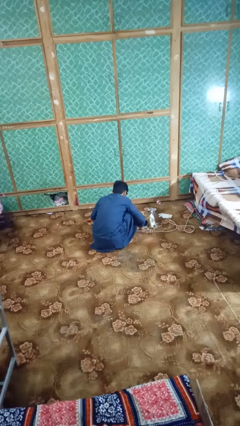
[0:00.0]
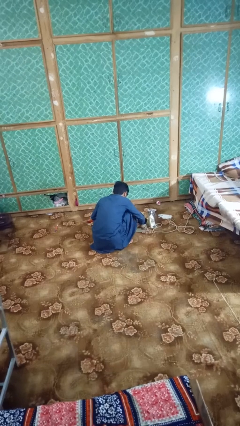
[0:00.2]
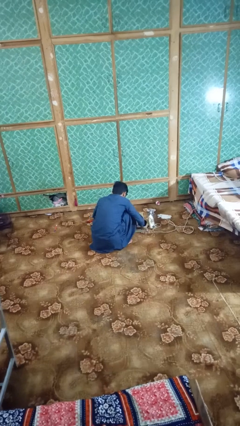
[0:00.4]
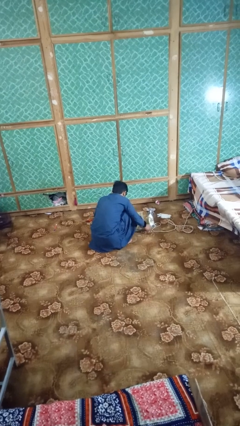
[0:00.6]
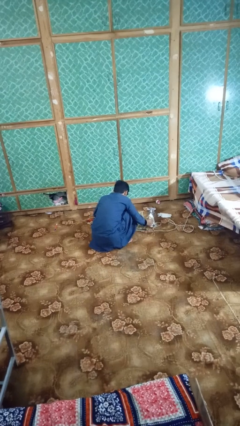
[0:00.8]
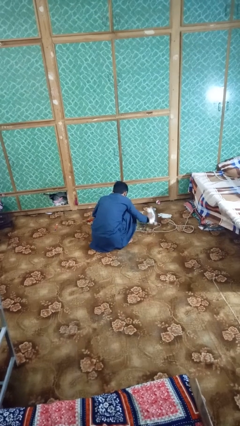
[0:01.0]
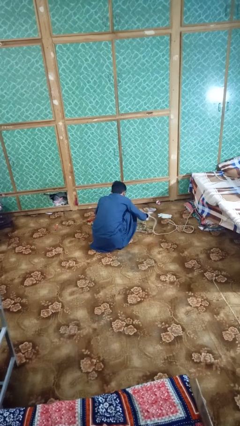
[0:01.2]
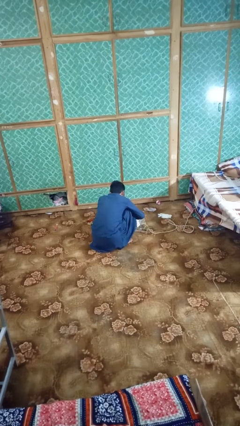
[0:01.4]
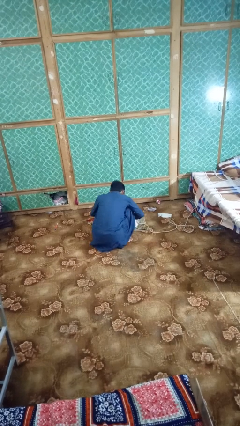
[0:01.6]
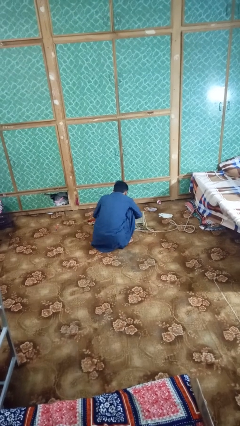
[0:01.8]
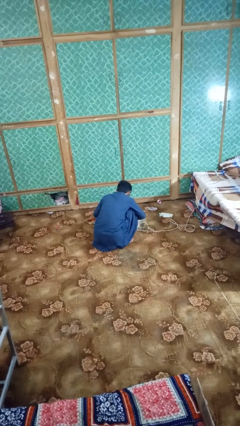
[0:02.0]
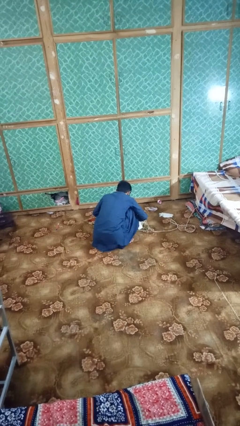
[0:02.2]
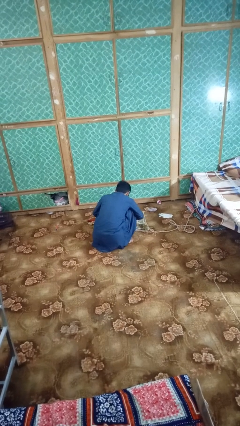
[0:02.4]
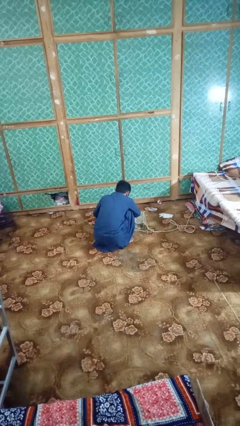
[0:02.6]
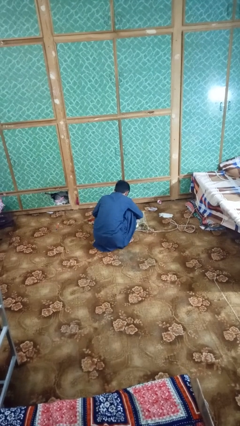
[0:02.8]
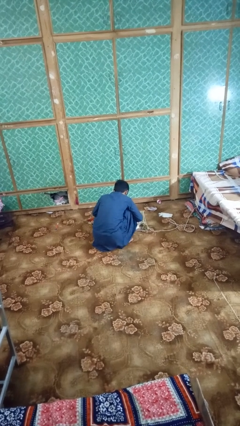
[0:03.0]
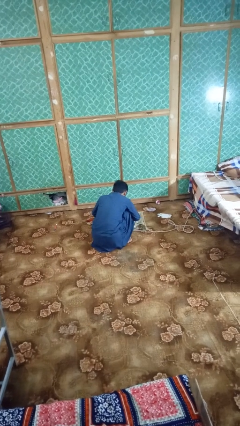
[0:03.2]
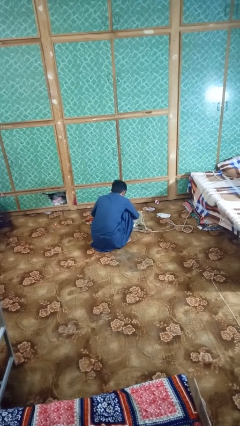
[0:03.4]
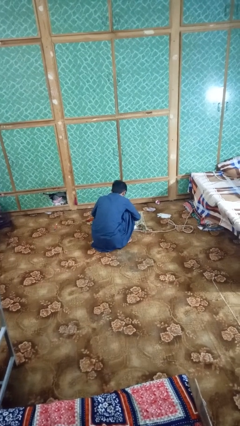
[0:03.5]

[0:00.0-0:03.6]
person irons clothes

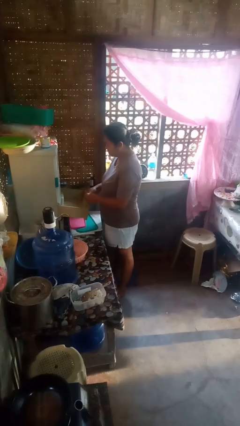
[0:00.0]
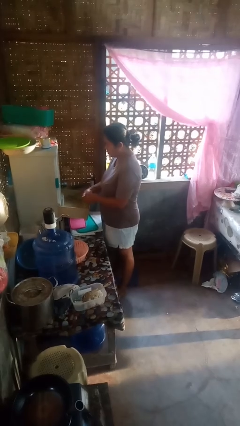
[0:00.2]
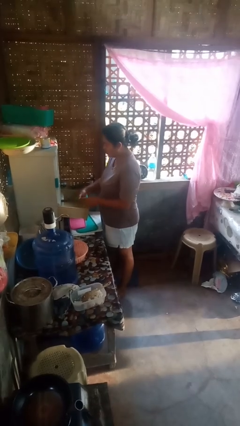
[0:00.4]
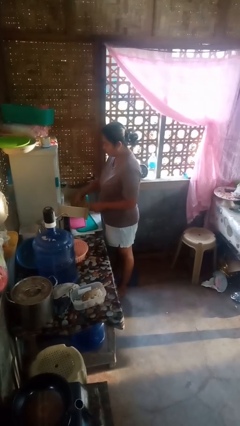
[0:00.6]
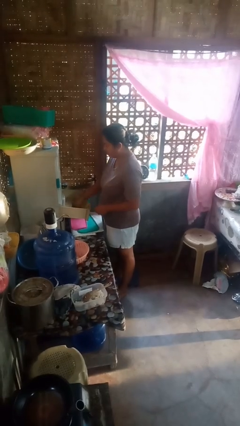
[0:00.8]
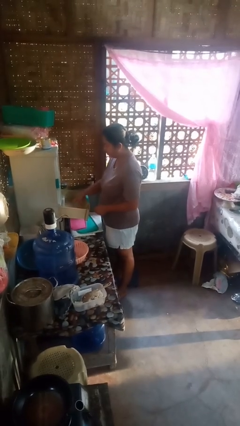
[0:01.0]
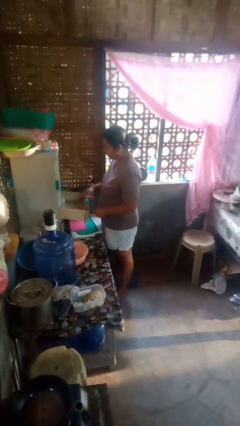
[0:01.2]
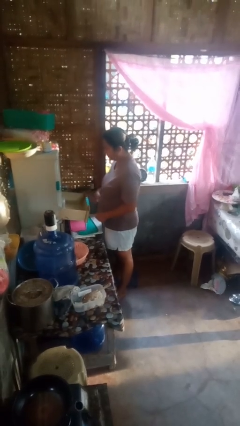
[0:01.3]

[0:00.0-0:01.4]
person puts object into kitchen drawer

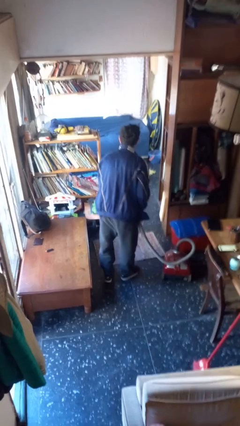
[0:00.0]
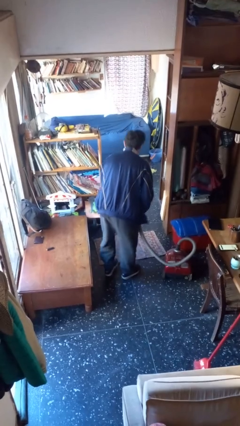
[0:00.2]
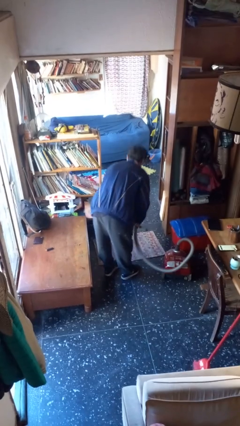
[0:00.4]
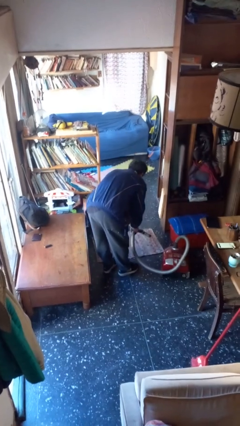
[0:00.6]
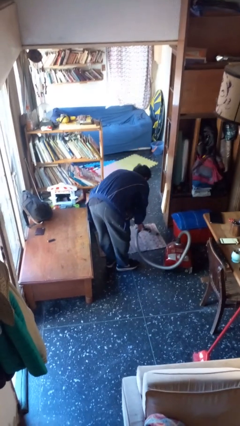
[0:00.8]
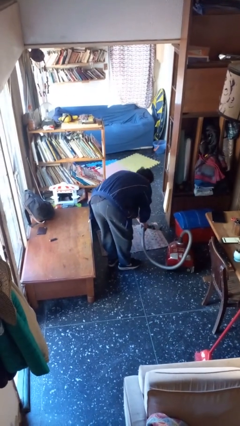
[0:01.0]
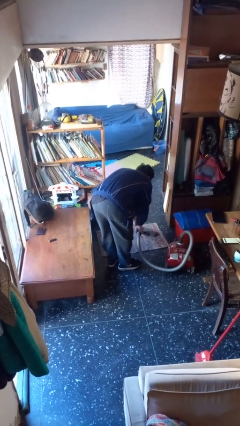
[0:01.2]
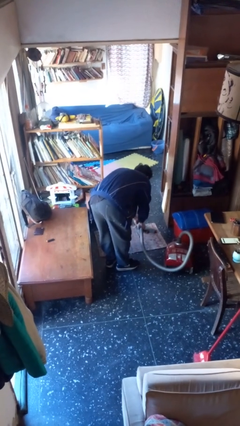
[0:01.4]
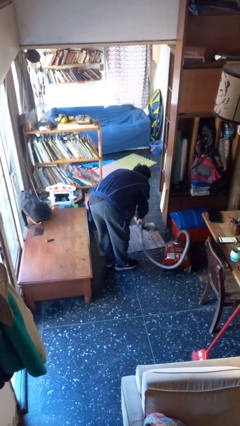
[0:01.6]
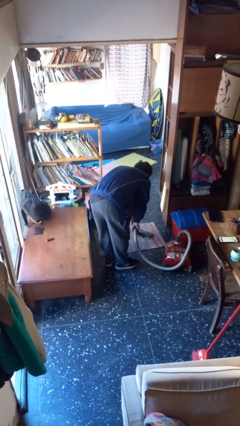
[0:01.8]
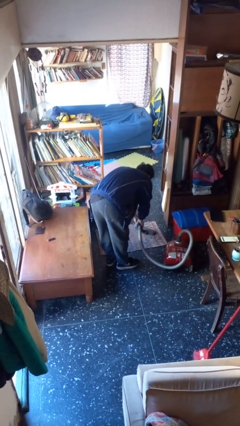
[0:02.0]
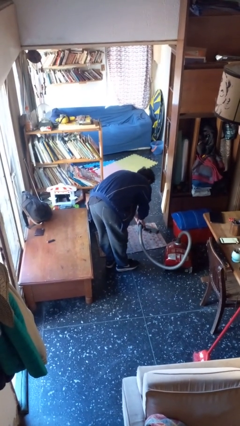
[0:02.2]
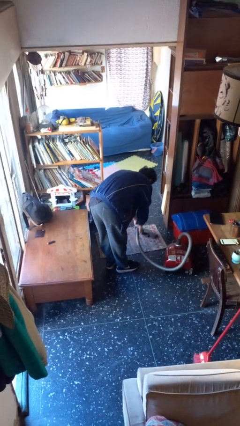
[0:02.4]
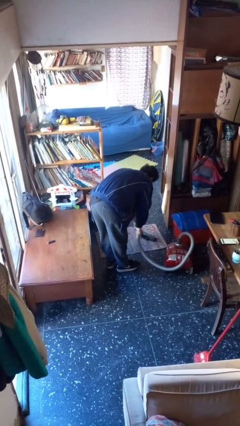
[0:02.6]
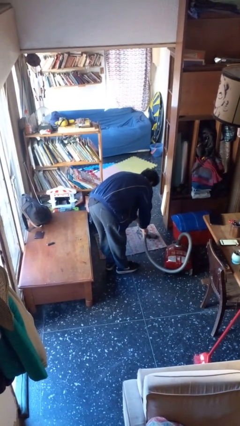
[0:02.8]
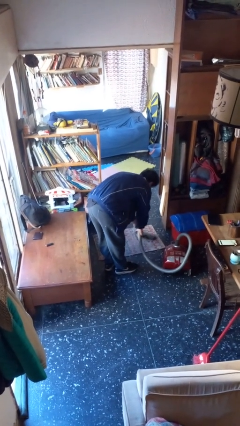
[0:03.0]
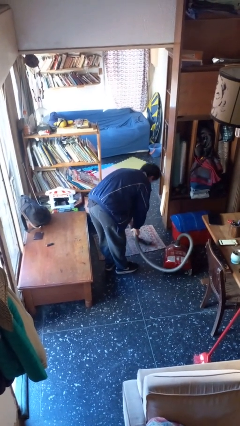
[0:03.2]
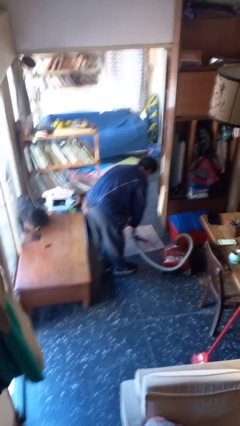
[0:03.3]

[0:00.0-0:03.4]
person vacuums carpet

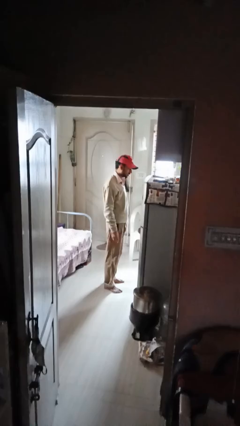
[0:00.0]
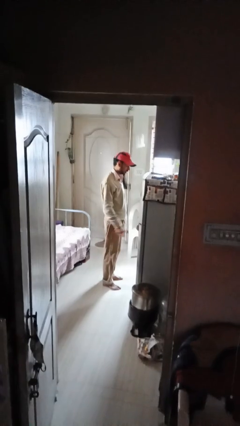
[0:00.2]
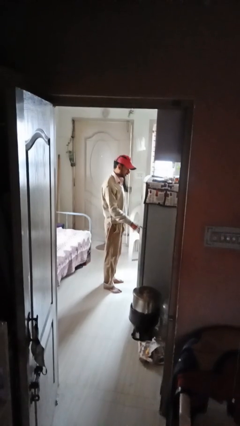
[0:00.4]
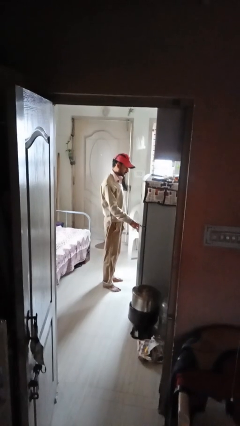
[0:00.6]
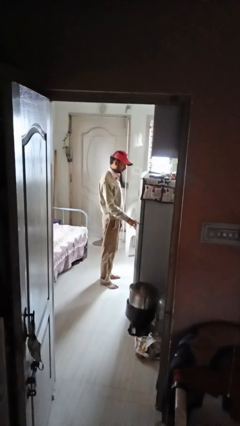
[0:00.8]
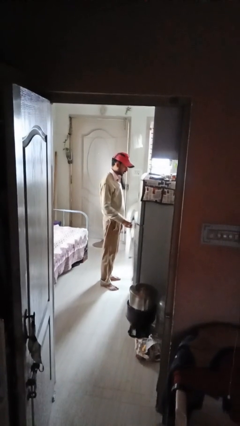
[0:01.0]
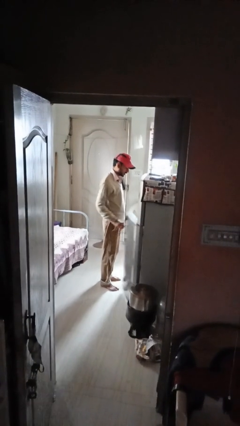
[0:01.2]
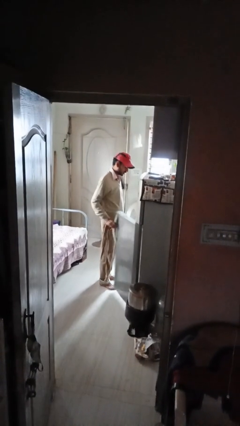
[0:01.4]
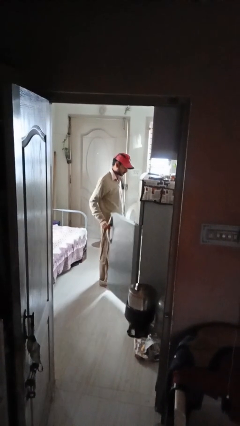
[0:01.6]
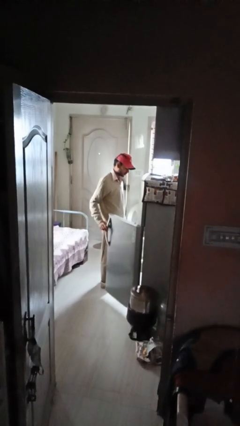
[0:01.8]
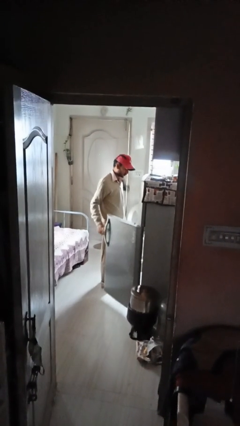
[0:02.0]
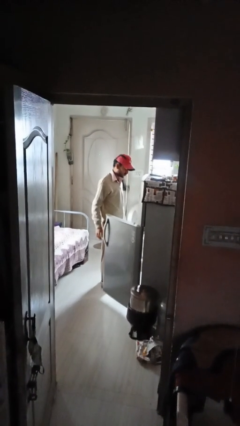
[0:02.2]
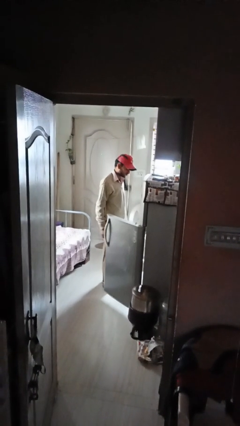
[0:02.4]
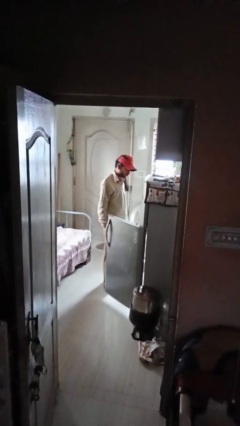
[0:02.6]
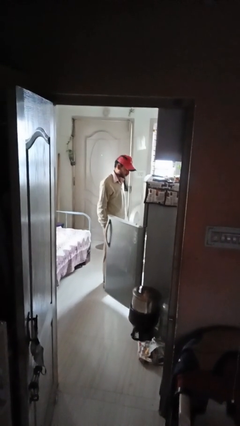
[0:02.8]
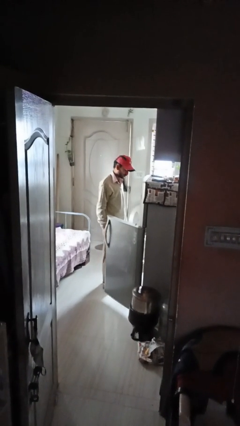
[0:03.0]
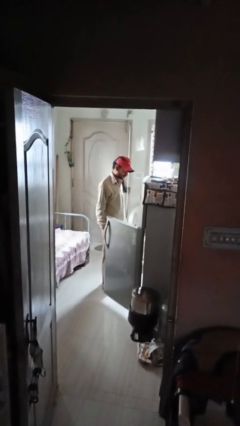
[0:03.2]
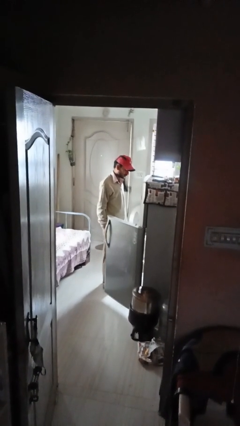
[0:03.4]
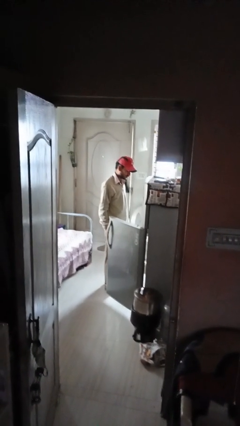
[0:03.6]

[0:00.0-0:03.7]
person opens refrigerator

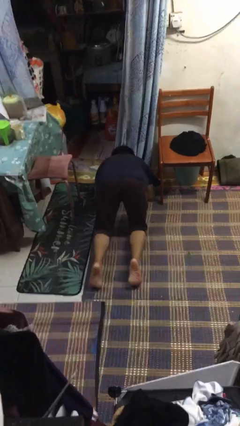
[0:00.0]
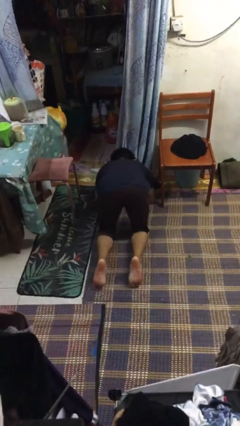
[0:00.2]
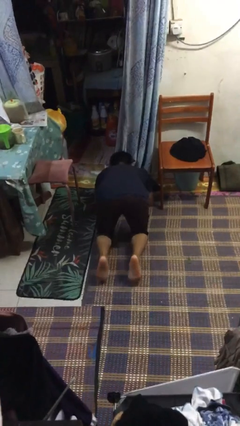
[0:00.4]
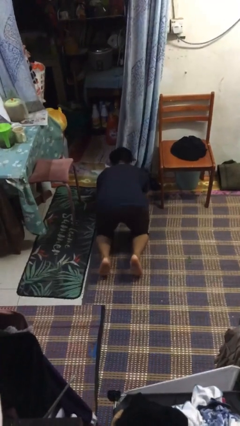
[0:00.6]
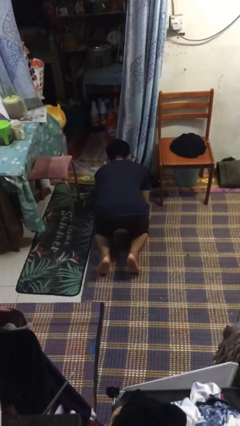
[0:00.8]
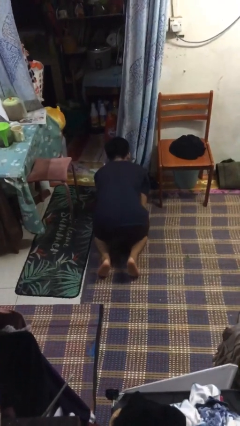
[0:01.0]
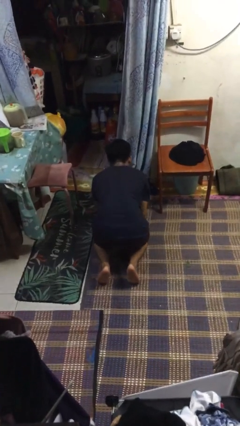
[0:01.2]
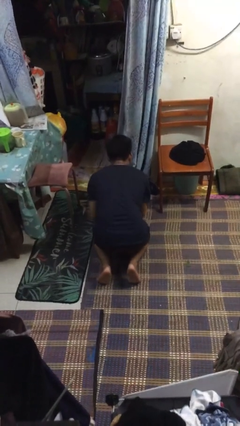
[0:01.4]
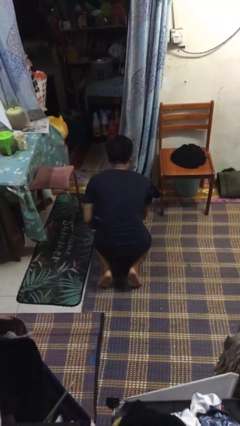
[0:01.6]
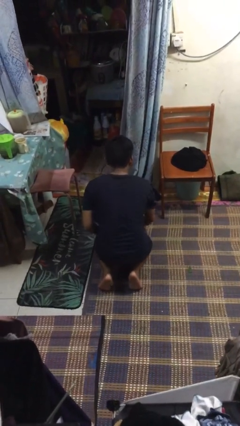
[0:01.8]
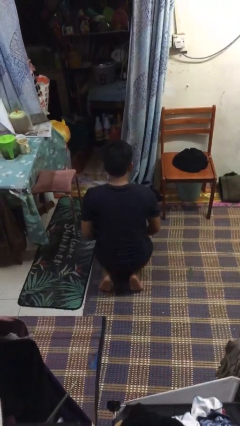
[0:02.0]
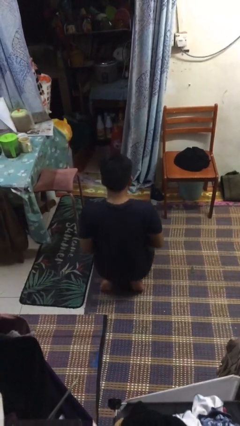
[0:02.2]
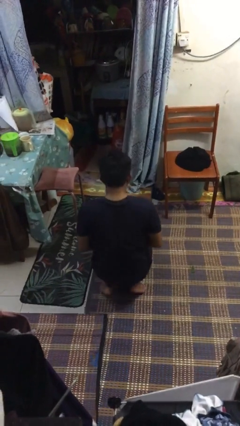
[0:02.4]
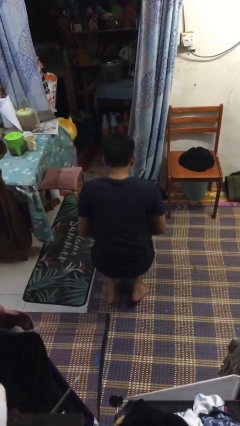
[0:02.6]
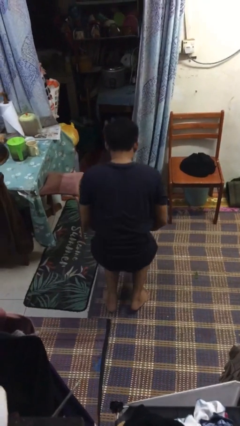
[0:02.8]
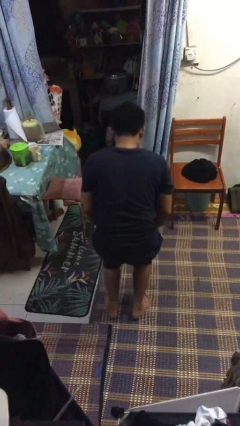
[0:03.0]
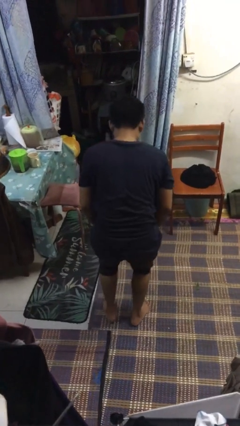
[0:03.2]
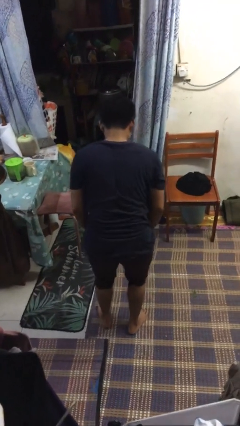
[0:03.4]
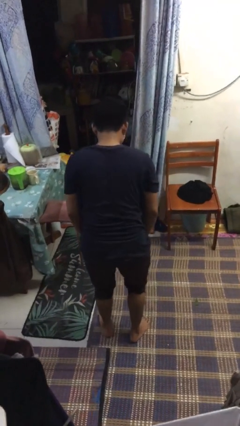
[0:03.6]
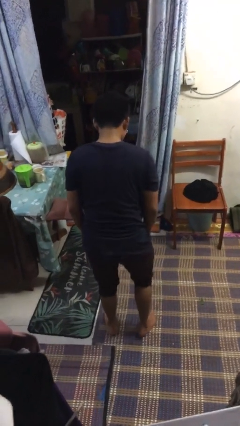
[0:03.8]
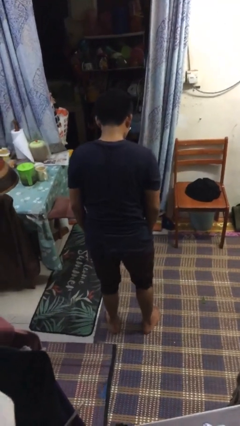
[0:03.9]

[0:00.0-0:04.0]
person stands up from floor

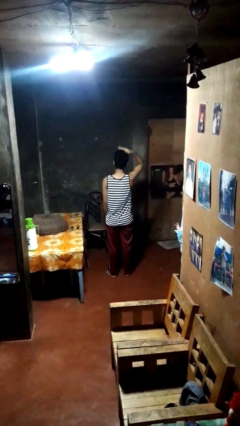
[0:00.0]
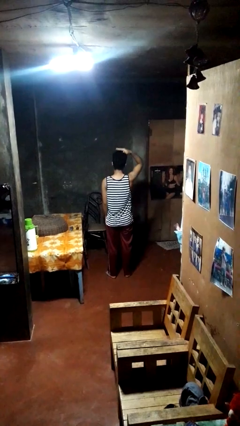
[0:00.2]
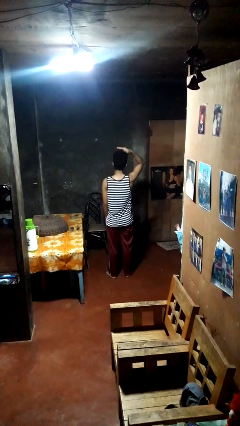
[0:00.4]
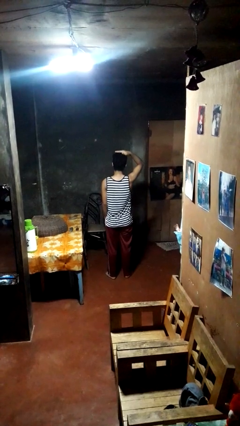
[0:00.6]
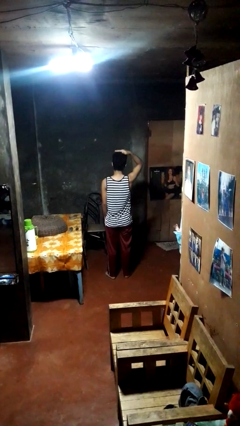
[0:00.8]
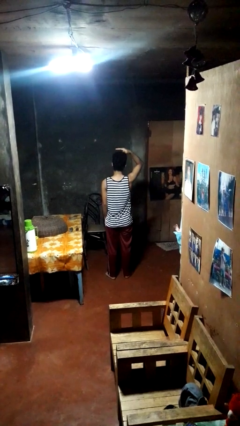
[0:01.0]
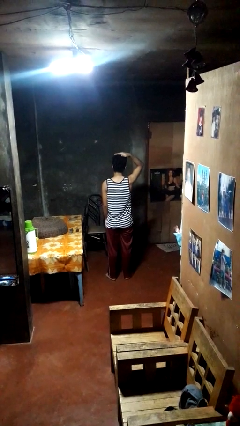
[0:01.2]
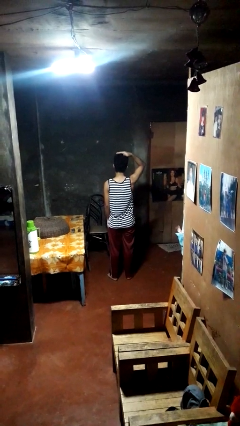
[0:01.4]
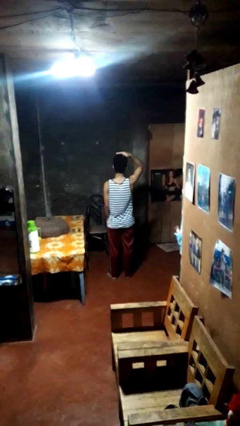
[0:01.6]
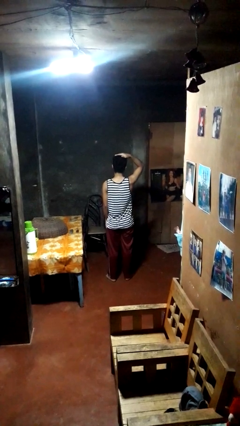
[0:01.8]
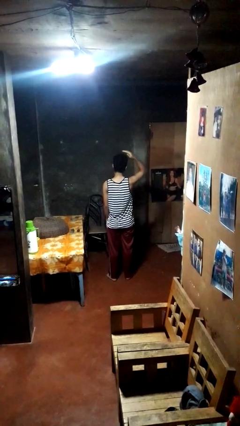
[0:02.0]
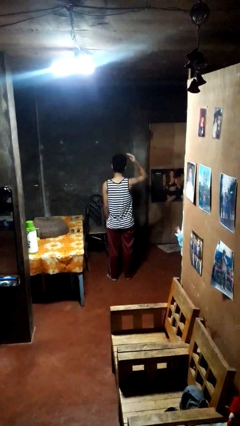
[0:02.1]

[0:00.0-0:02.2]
person pats head
